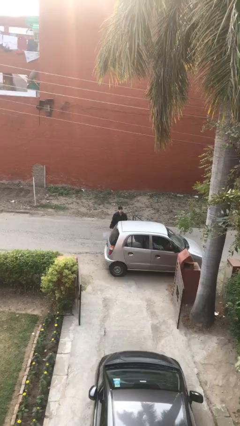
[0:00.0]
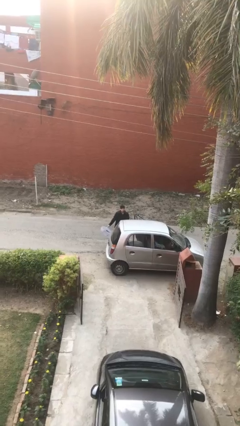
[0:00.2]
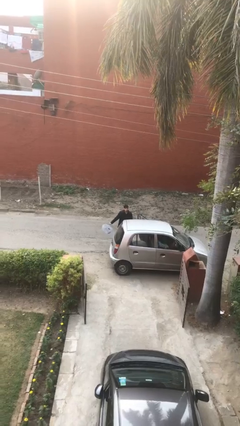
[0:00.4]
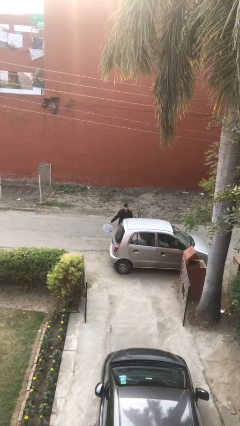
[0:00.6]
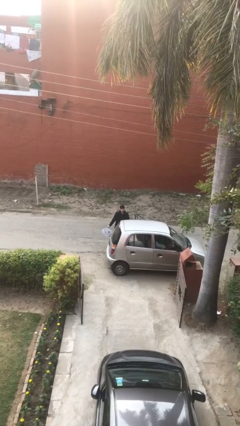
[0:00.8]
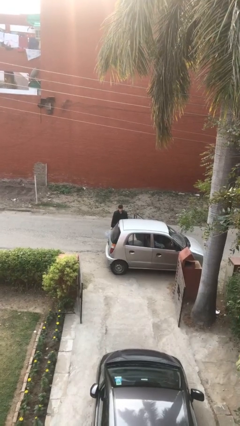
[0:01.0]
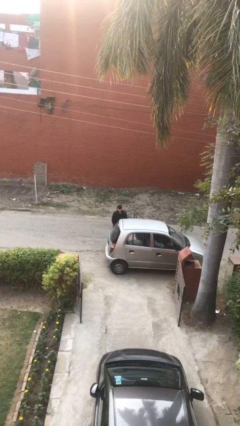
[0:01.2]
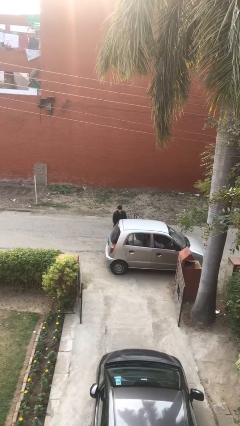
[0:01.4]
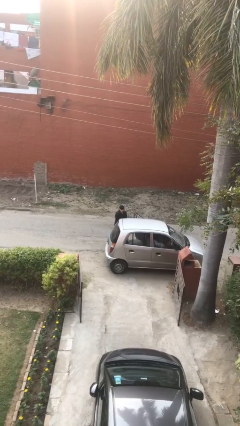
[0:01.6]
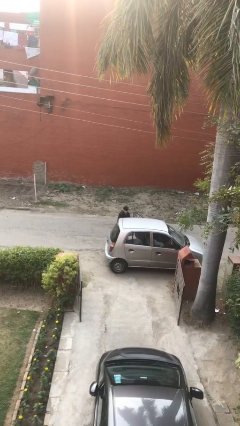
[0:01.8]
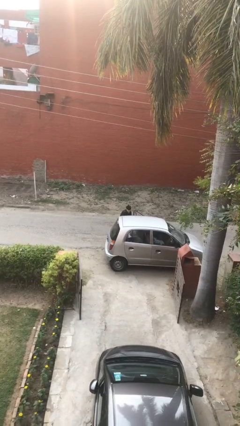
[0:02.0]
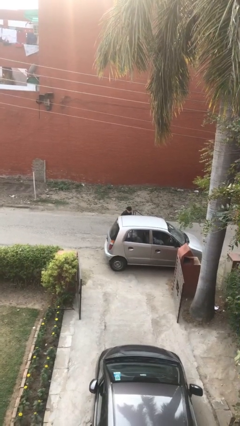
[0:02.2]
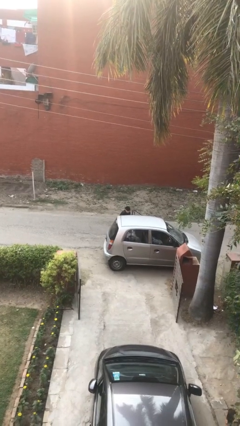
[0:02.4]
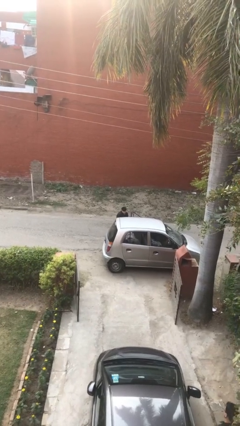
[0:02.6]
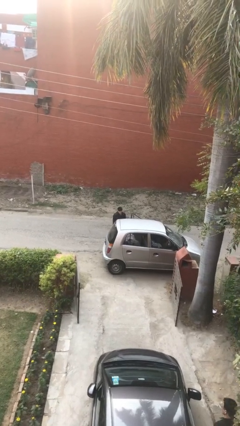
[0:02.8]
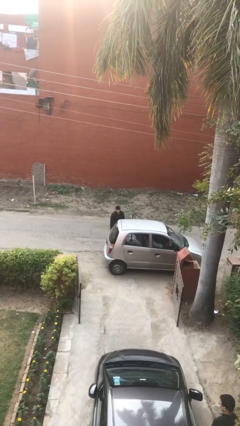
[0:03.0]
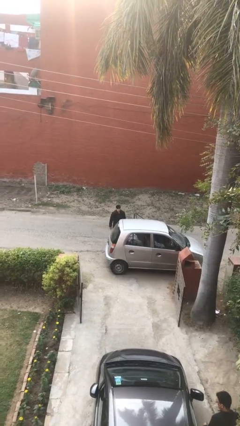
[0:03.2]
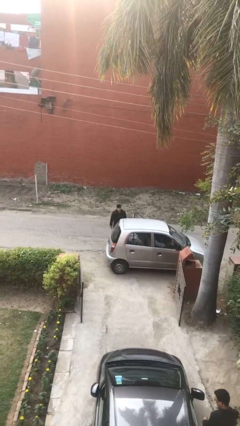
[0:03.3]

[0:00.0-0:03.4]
person loads car

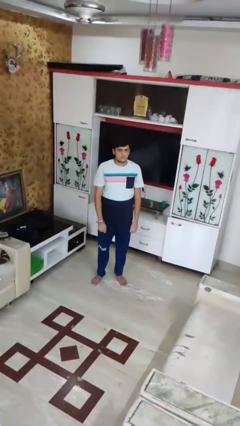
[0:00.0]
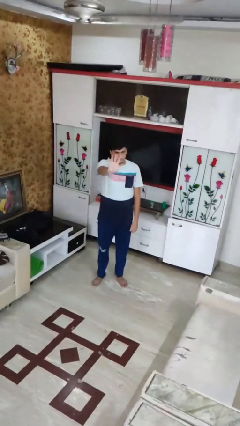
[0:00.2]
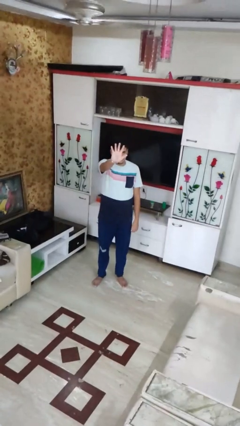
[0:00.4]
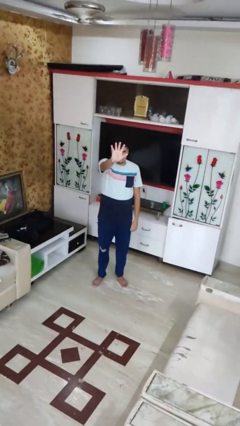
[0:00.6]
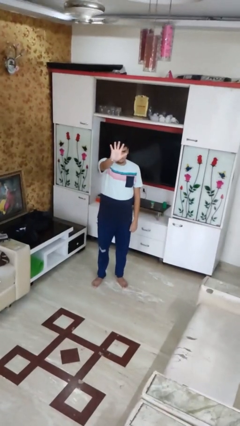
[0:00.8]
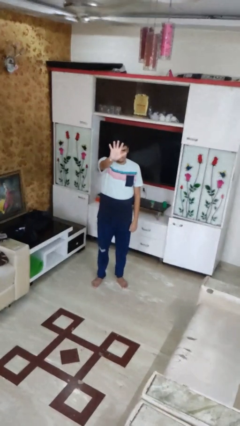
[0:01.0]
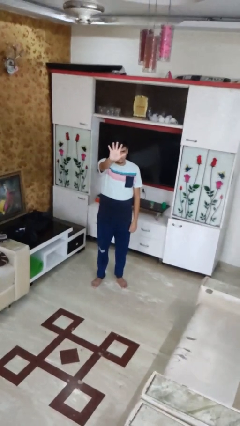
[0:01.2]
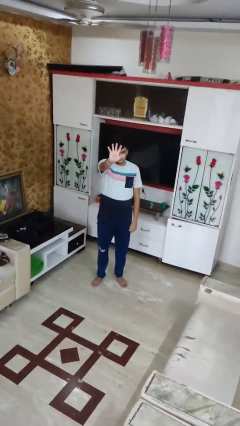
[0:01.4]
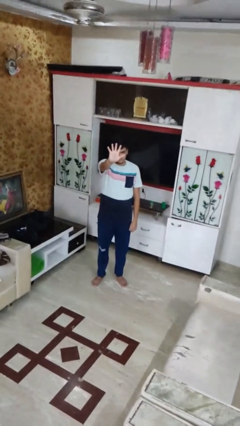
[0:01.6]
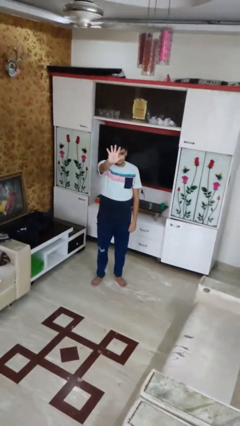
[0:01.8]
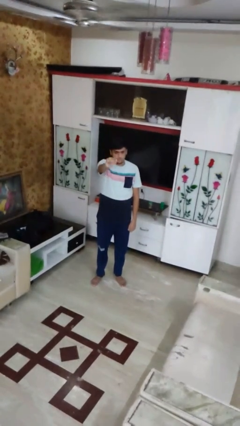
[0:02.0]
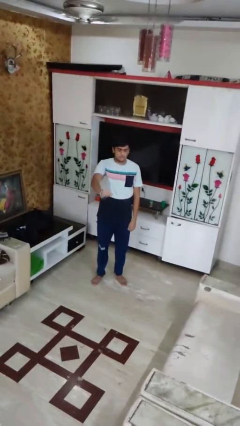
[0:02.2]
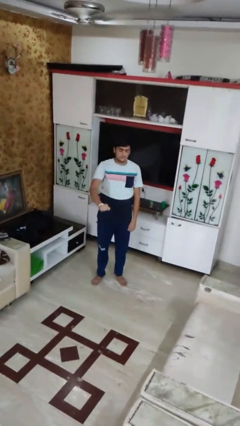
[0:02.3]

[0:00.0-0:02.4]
person gestures number five

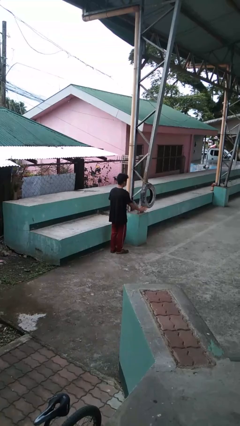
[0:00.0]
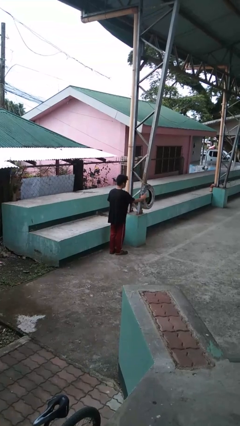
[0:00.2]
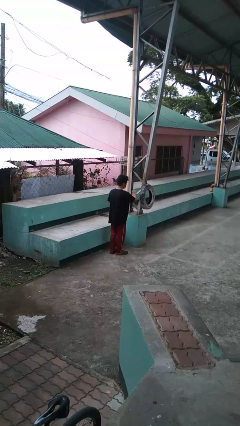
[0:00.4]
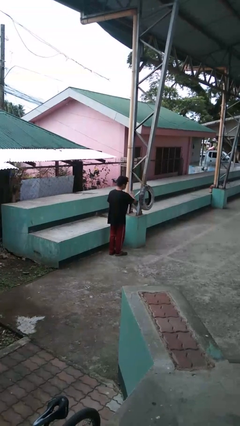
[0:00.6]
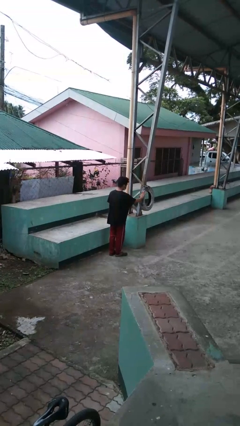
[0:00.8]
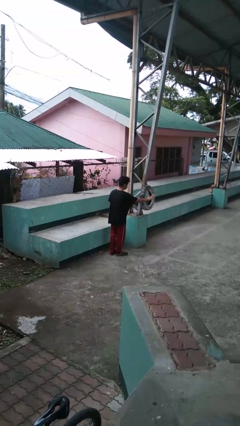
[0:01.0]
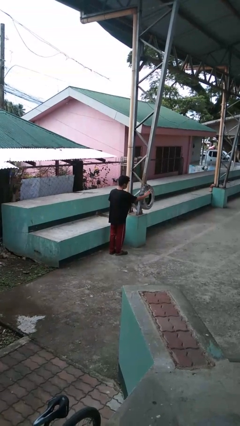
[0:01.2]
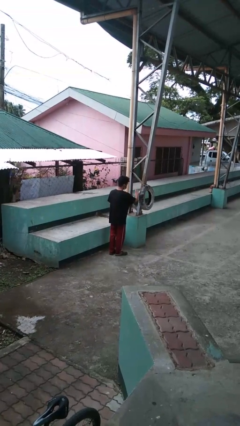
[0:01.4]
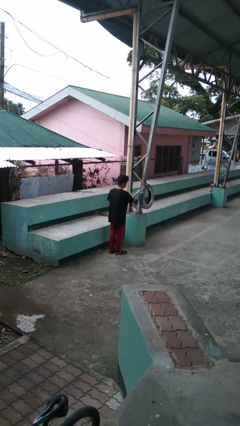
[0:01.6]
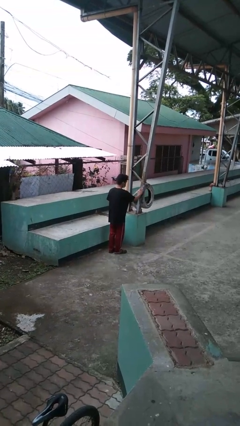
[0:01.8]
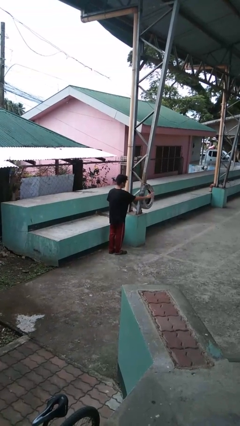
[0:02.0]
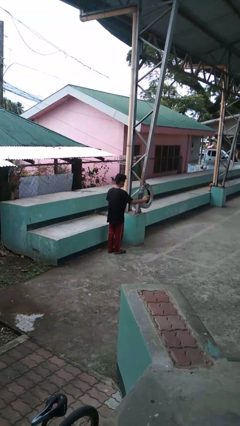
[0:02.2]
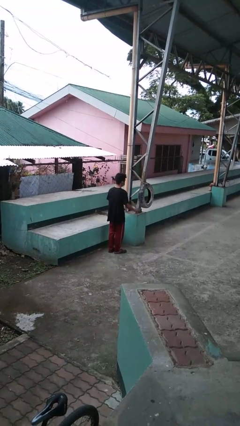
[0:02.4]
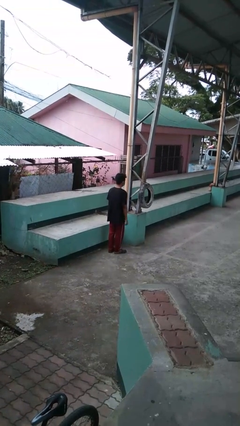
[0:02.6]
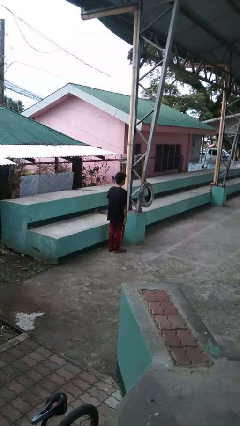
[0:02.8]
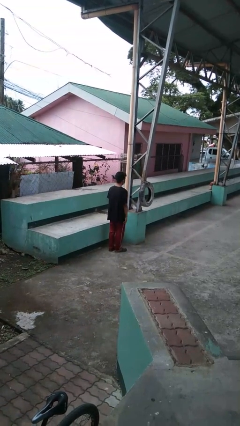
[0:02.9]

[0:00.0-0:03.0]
person waves hand over object

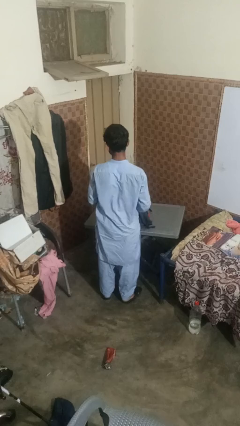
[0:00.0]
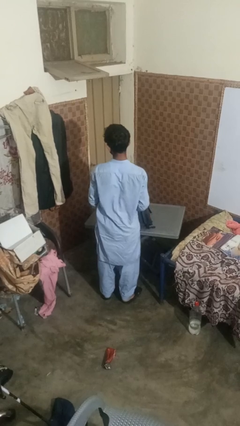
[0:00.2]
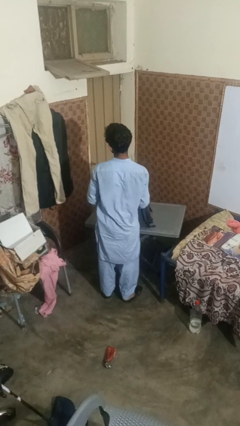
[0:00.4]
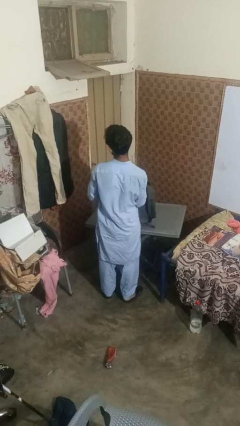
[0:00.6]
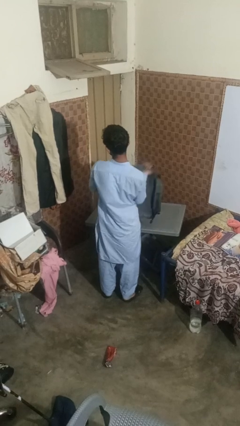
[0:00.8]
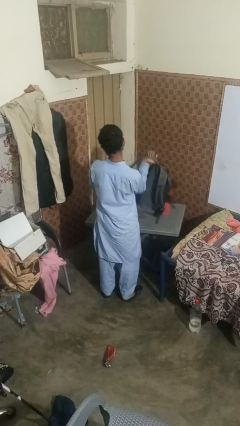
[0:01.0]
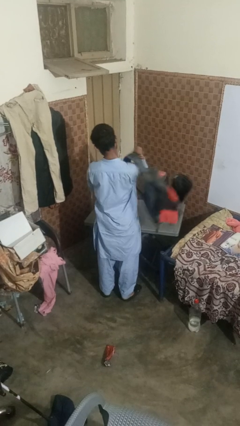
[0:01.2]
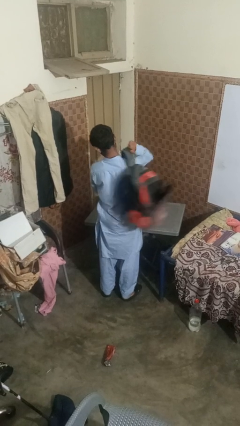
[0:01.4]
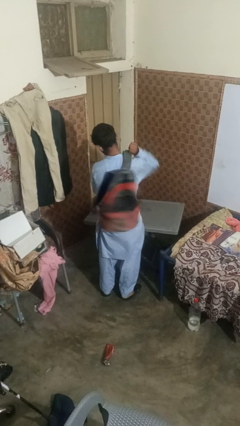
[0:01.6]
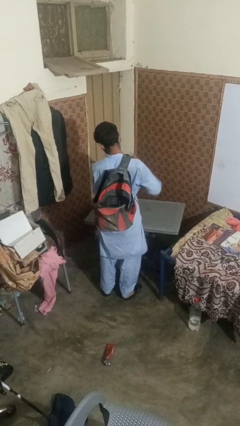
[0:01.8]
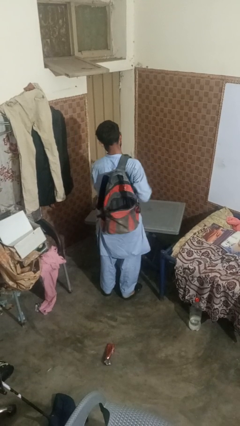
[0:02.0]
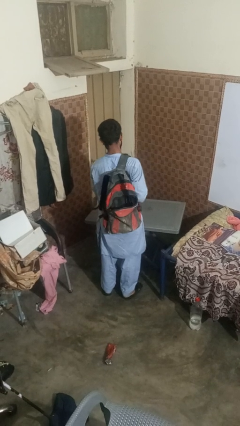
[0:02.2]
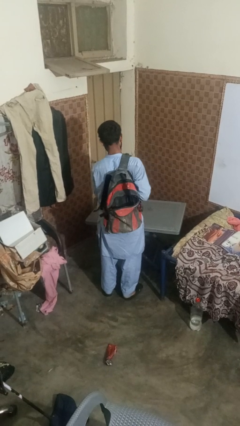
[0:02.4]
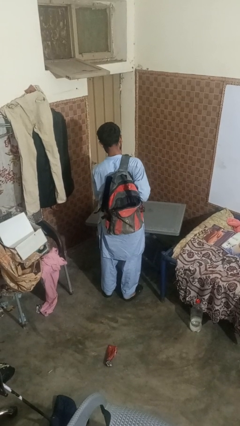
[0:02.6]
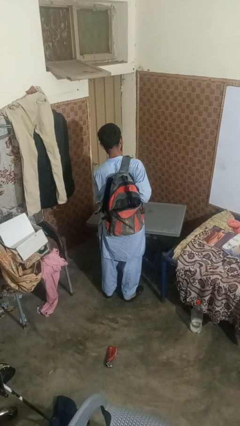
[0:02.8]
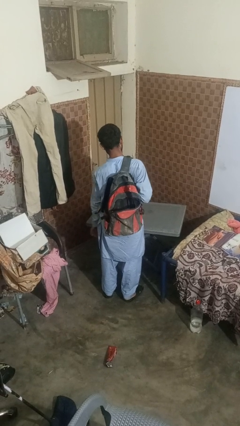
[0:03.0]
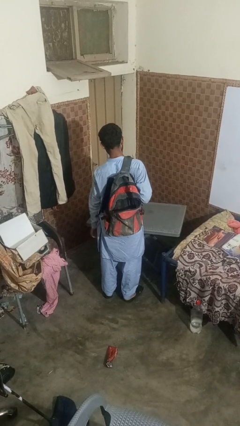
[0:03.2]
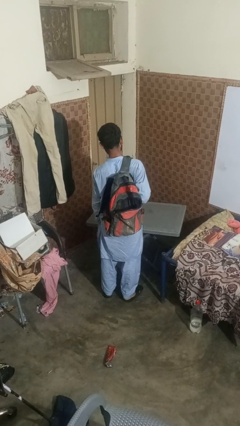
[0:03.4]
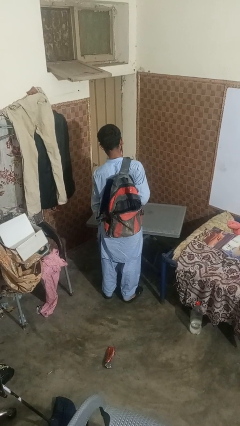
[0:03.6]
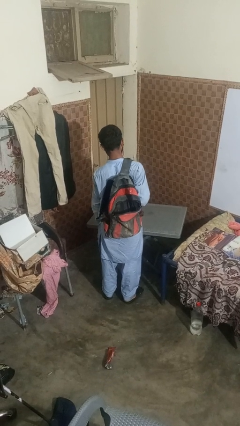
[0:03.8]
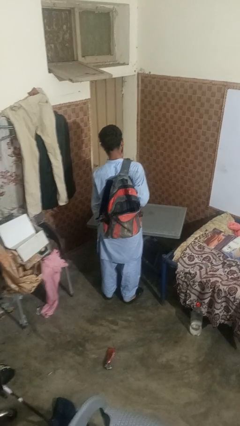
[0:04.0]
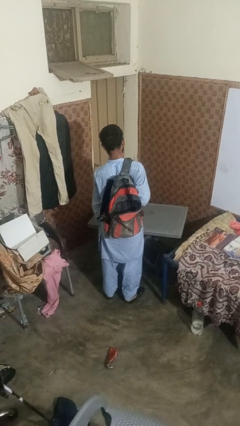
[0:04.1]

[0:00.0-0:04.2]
person puts on backpack

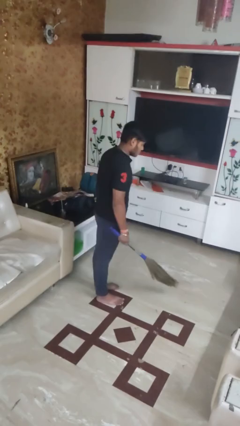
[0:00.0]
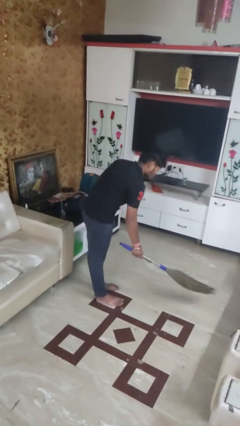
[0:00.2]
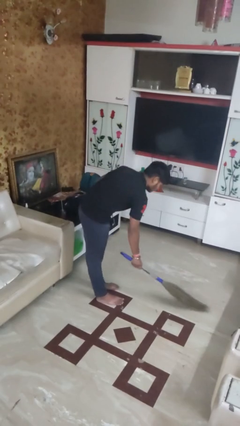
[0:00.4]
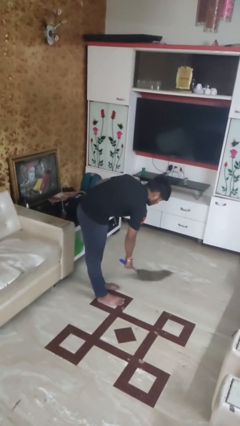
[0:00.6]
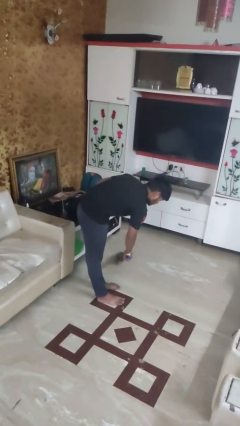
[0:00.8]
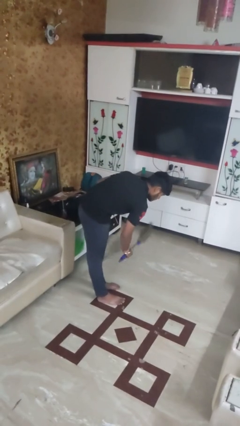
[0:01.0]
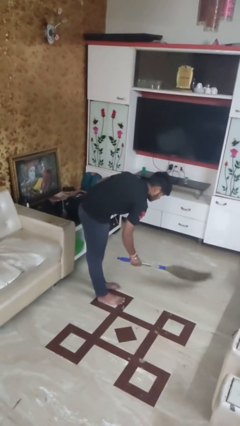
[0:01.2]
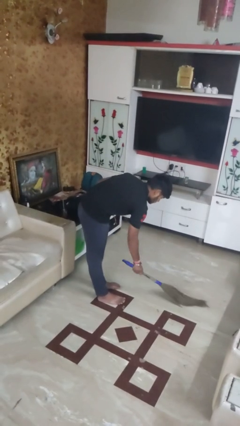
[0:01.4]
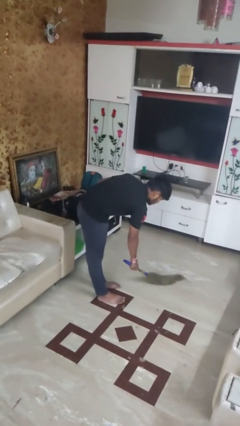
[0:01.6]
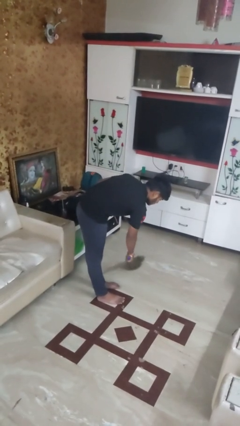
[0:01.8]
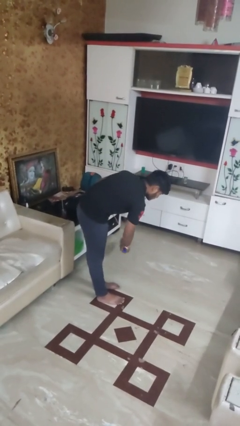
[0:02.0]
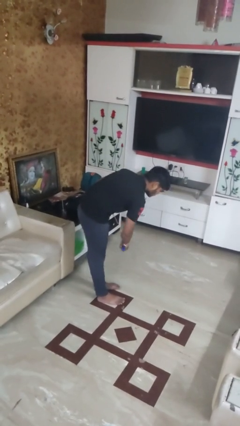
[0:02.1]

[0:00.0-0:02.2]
person sweeps floor

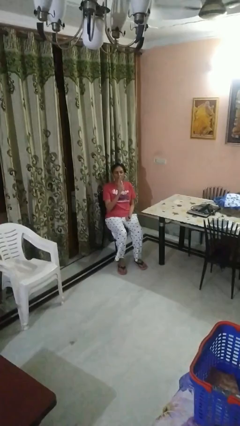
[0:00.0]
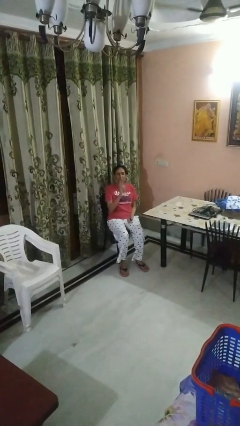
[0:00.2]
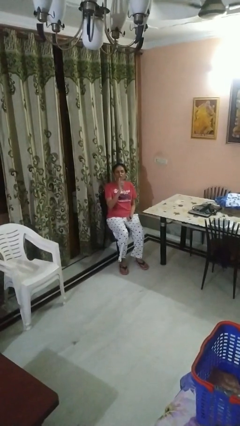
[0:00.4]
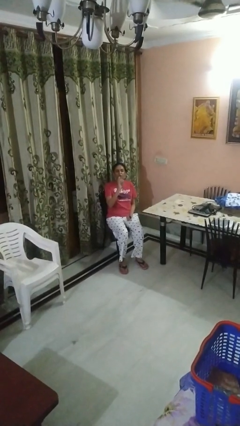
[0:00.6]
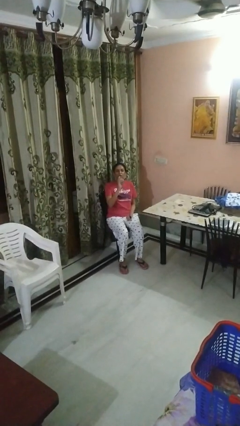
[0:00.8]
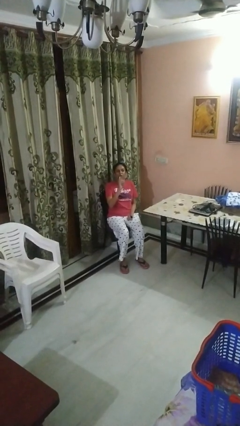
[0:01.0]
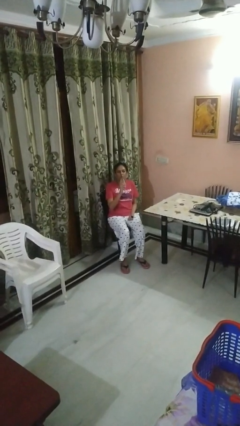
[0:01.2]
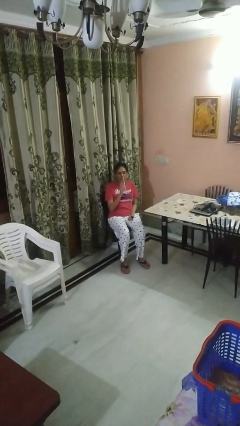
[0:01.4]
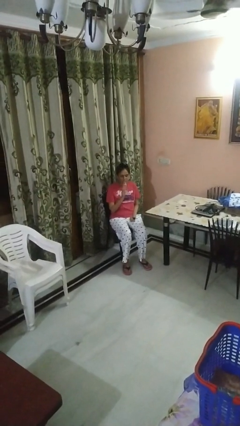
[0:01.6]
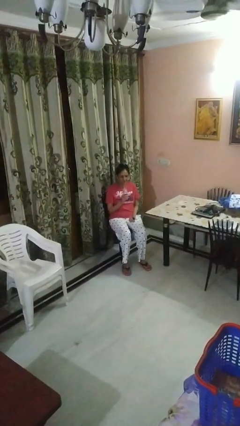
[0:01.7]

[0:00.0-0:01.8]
person drinks from bottle

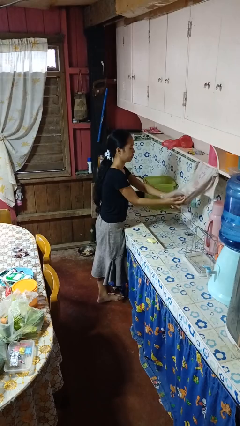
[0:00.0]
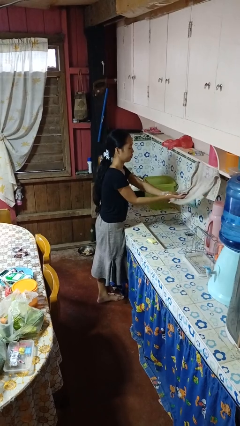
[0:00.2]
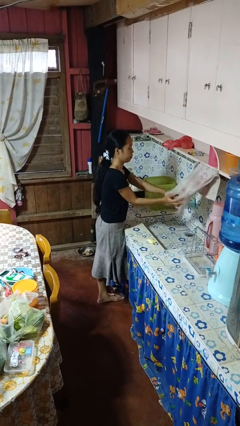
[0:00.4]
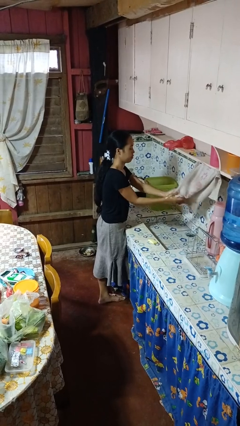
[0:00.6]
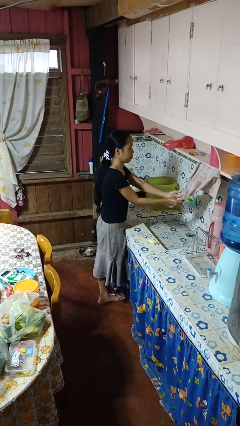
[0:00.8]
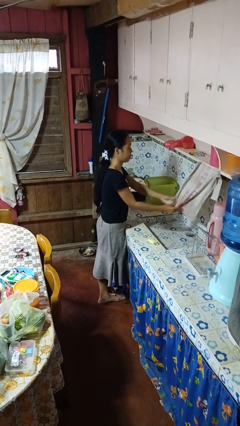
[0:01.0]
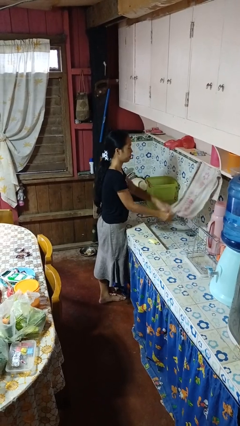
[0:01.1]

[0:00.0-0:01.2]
person dries hands with towel
